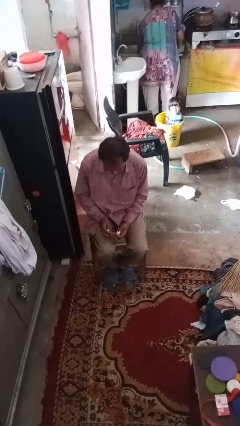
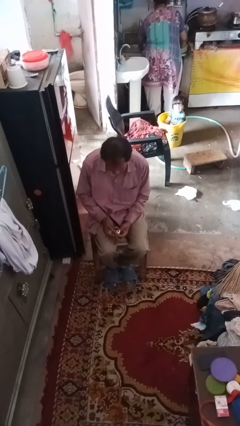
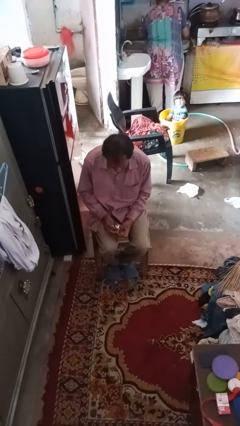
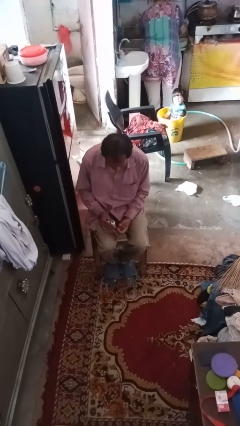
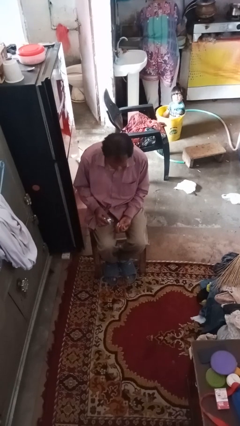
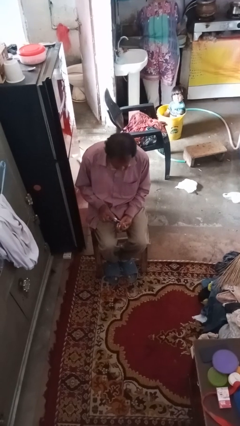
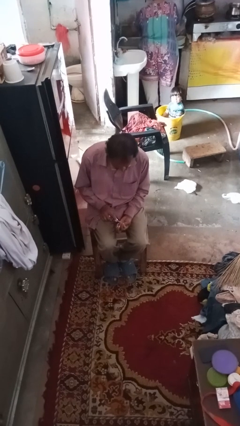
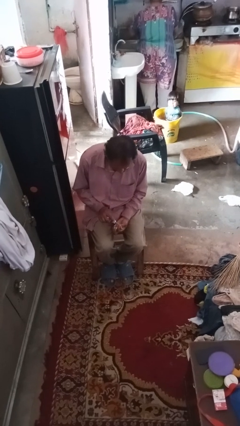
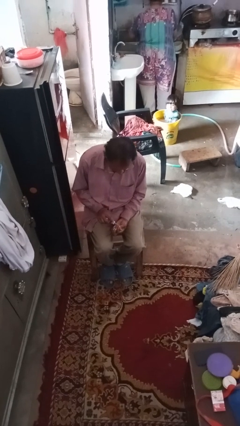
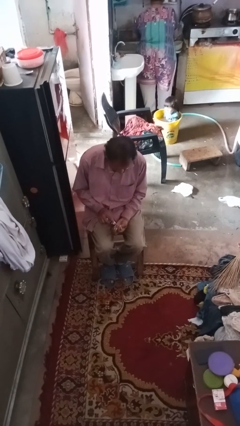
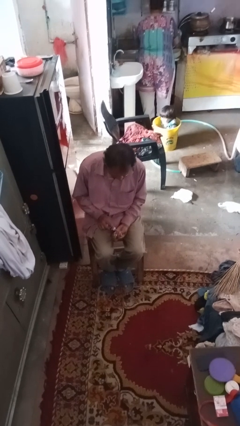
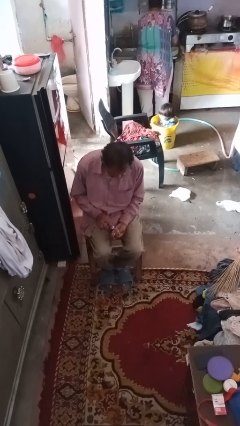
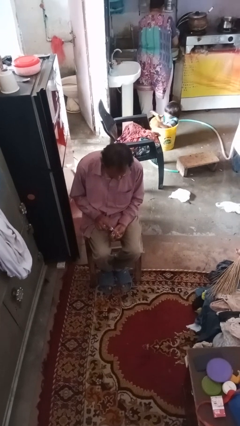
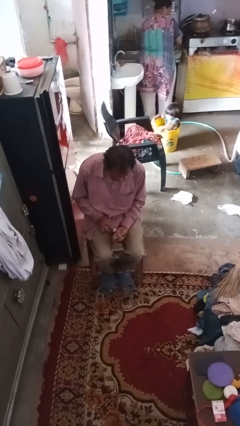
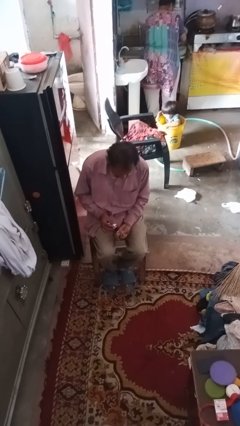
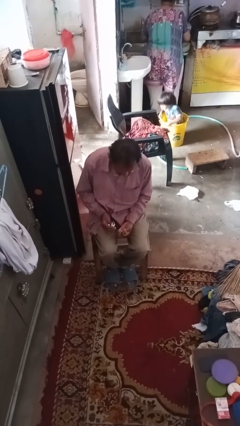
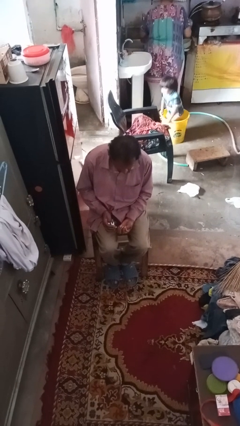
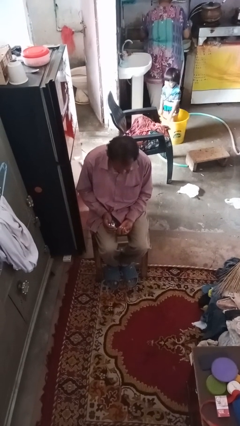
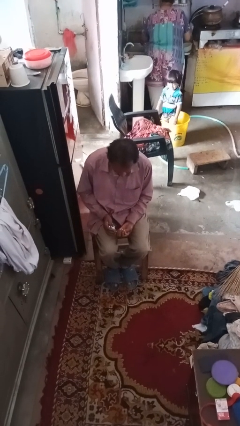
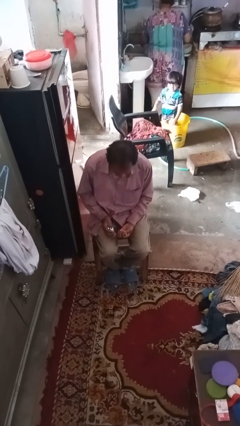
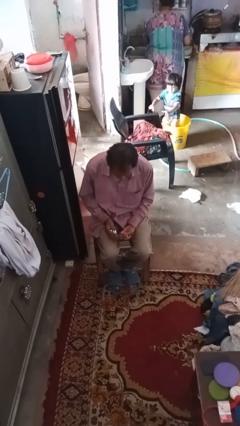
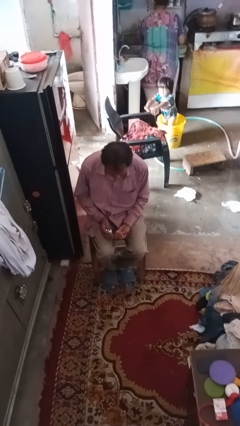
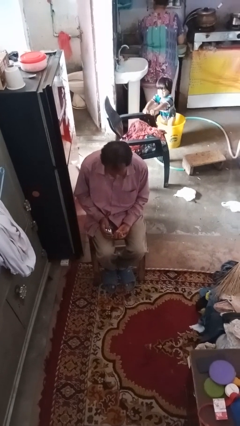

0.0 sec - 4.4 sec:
person paints fingernails

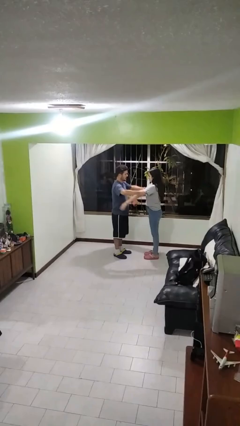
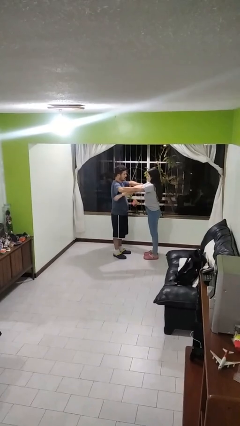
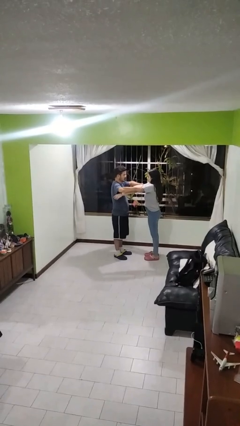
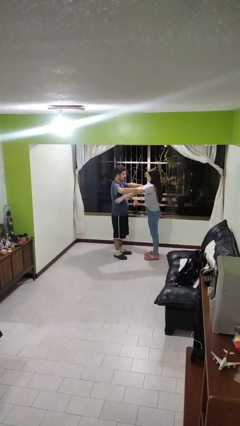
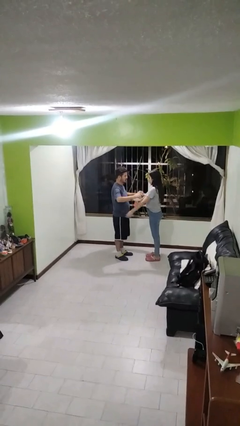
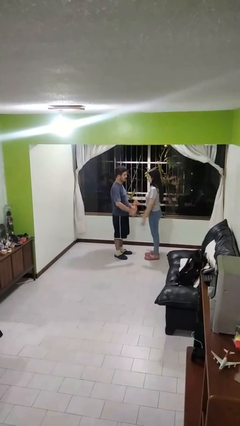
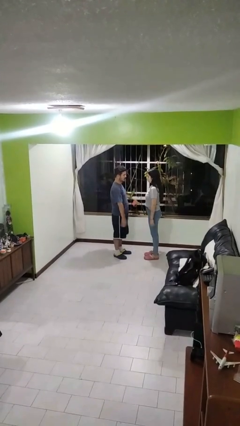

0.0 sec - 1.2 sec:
person grabs person by bicep

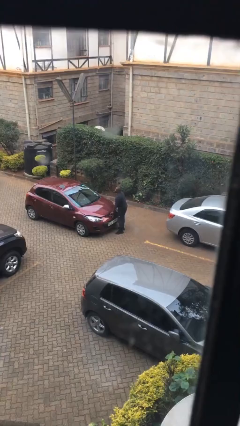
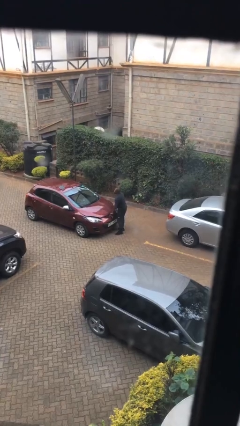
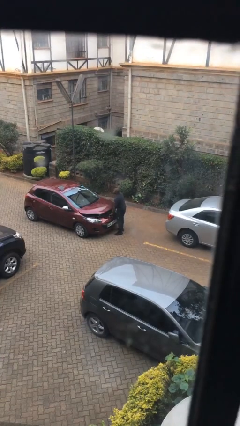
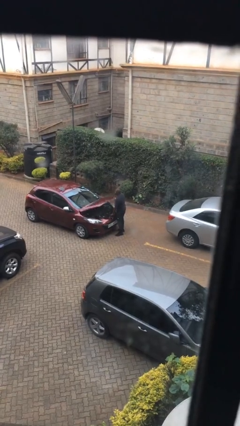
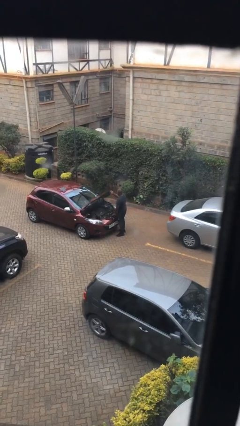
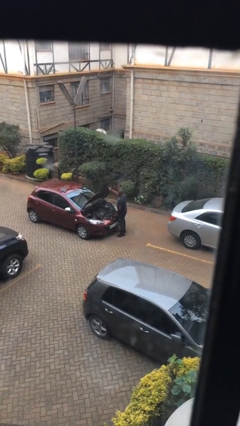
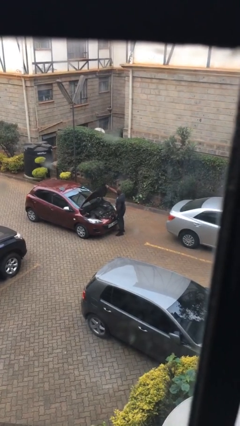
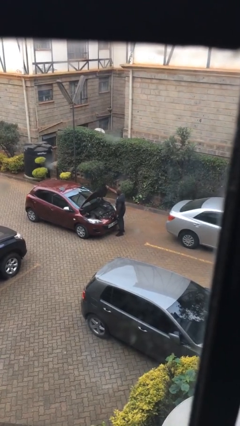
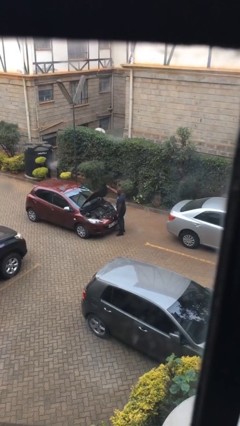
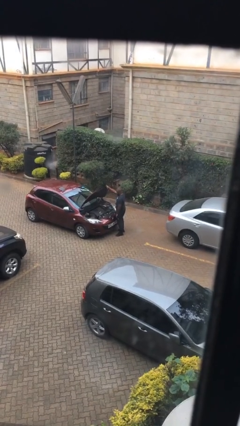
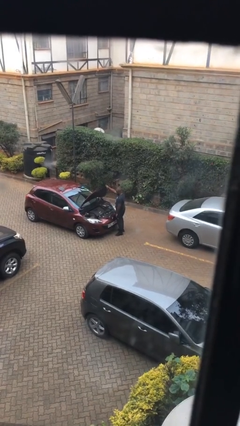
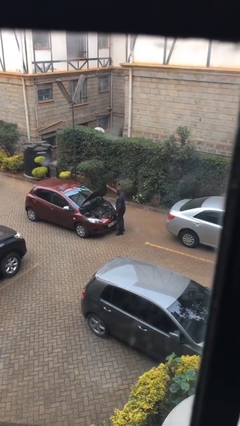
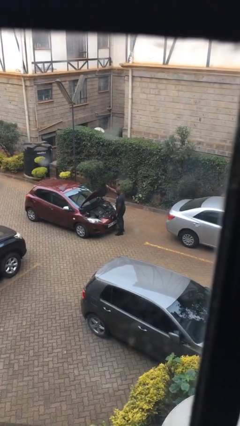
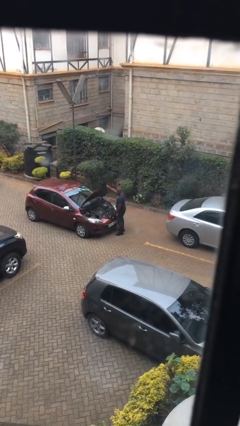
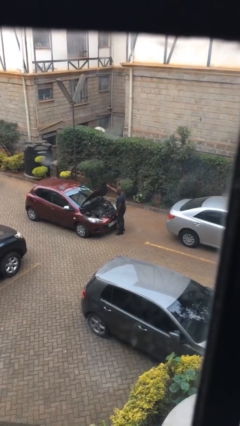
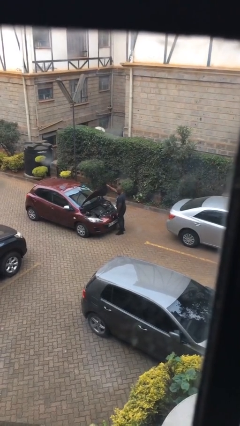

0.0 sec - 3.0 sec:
person opens car hood

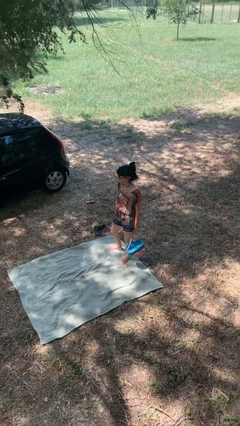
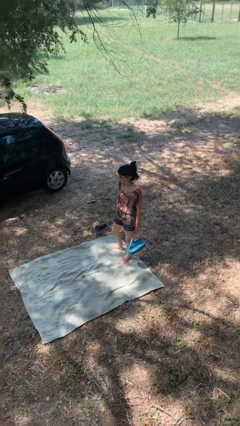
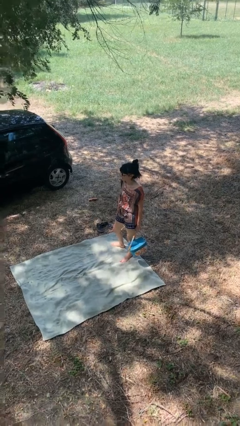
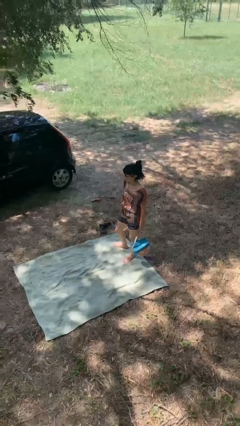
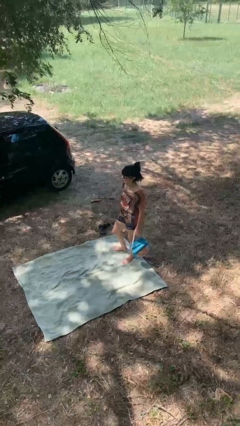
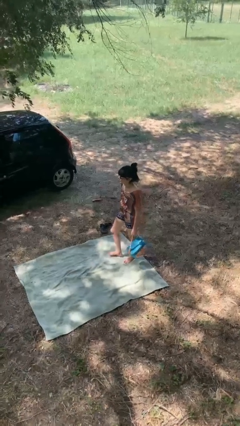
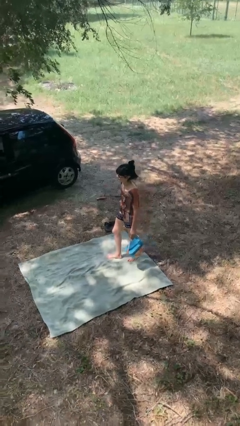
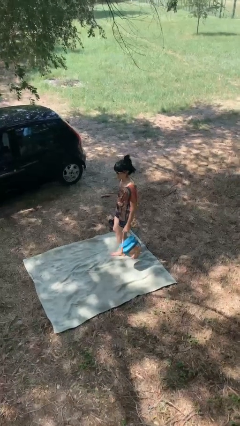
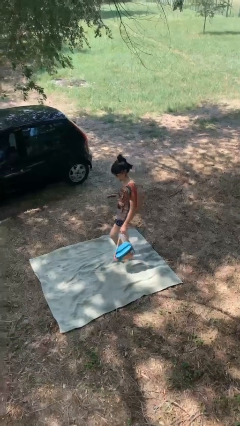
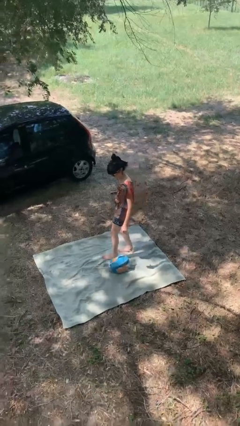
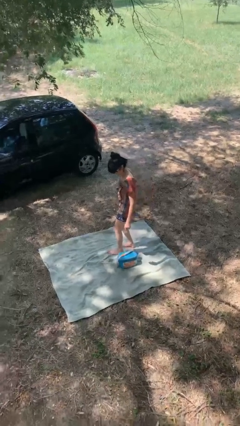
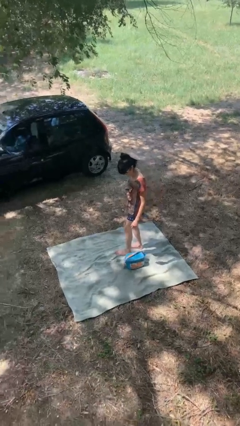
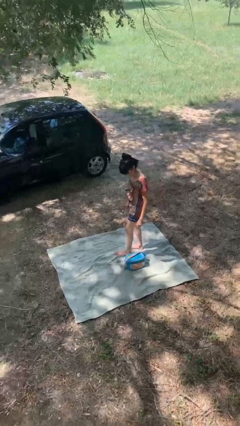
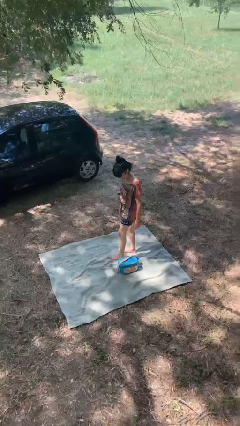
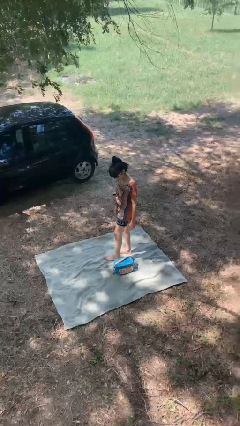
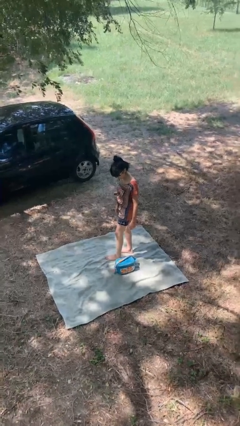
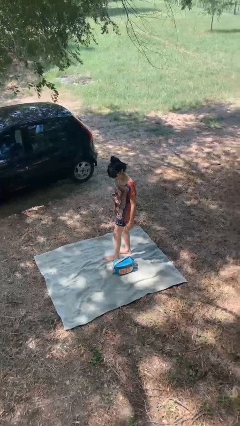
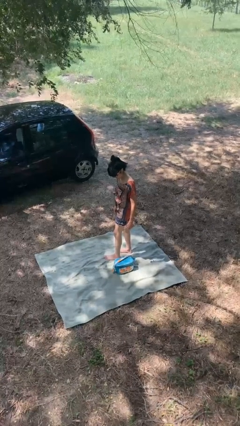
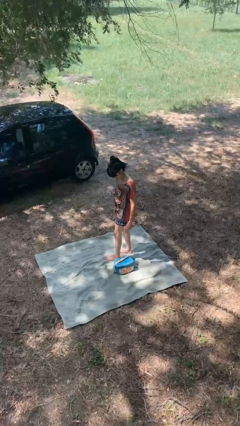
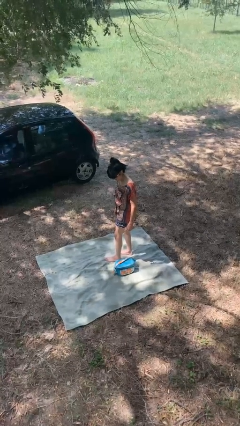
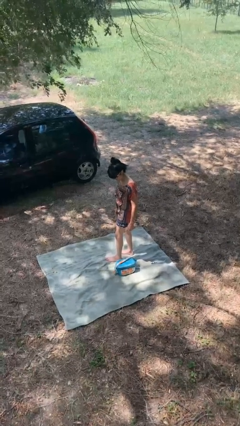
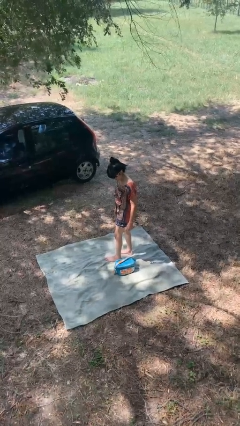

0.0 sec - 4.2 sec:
person drops object

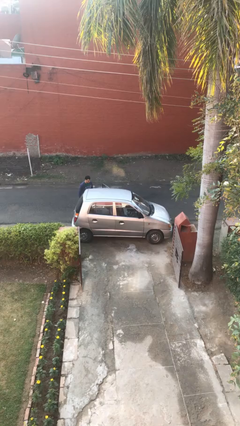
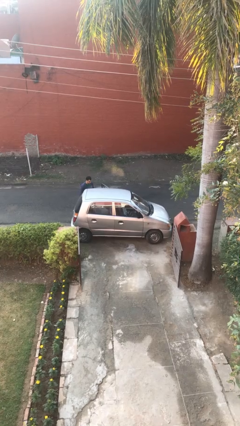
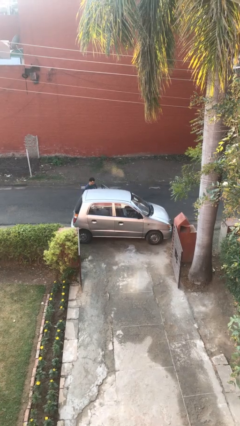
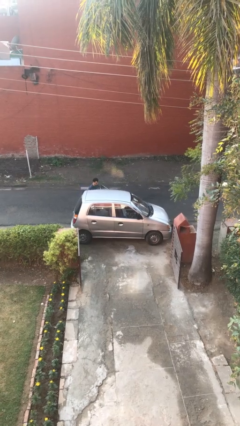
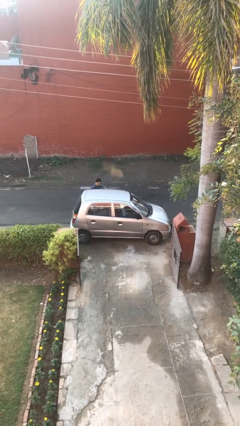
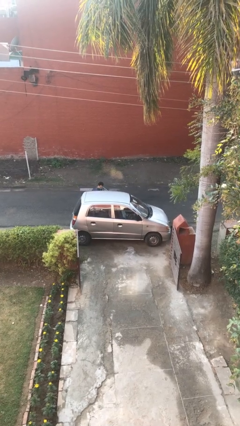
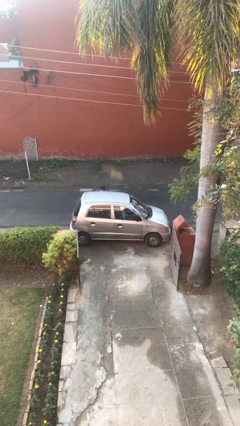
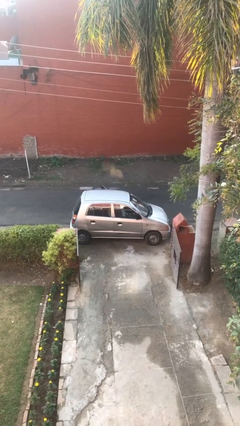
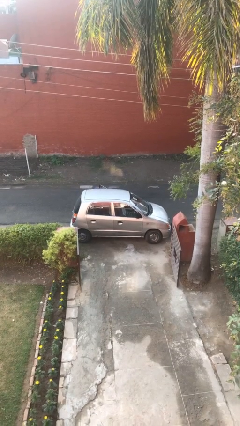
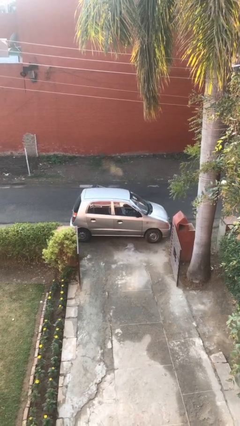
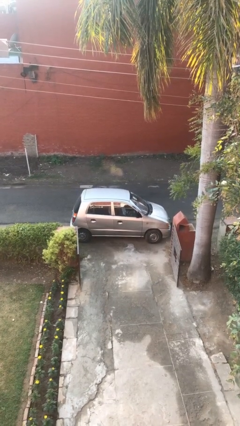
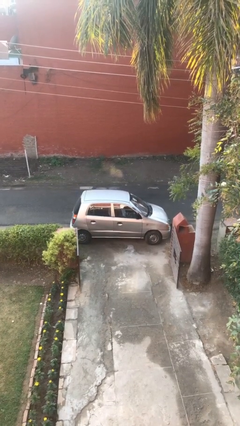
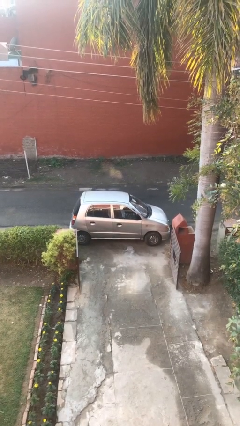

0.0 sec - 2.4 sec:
car picks up person

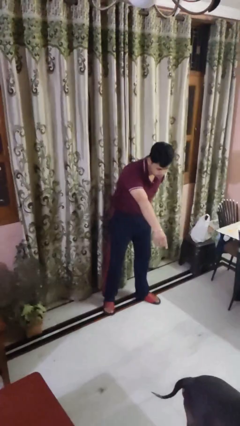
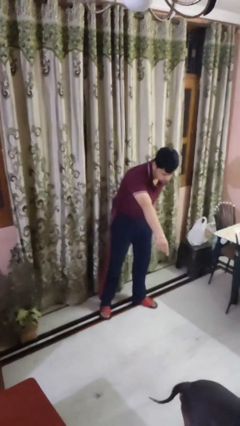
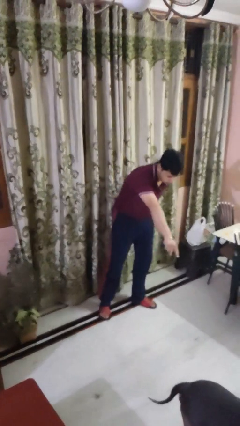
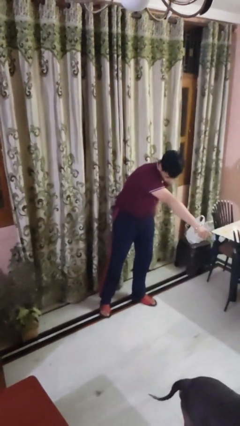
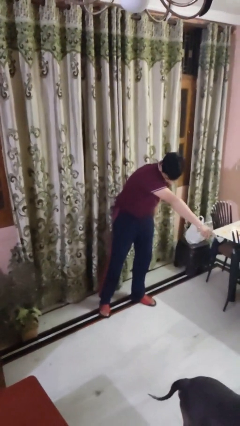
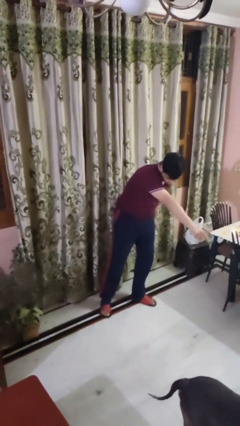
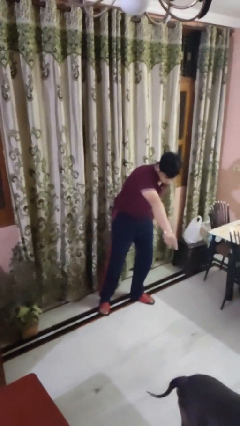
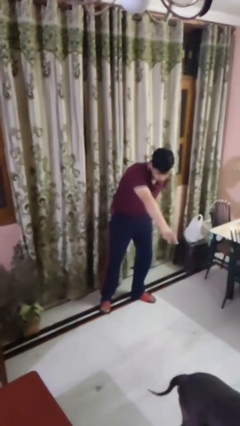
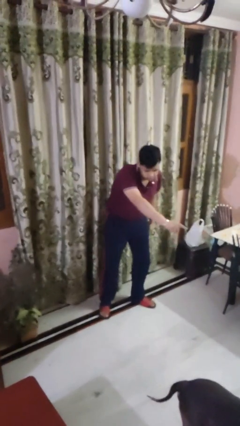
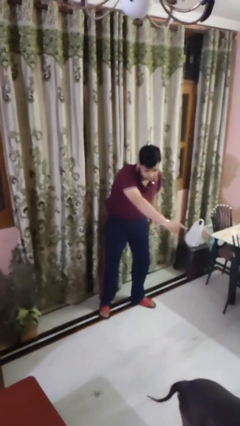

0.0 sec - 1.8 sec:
person points to dog

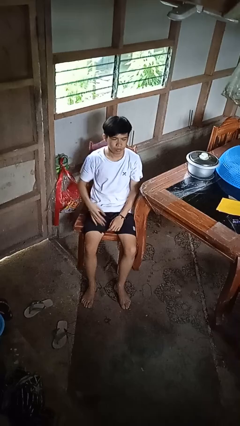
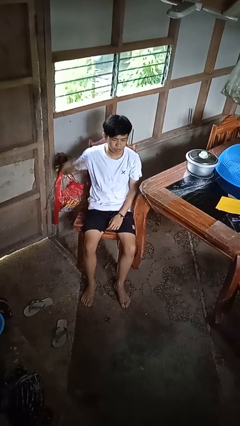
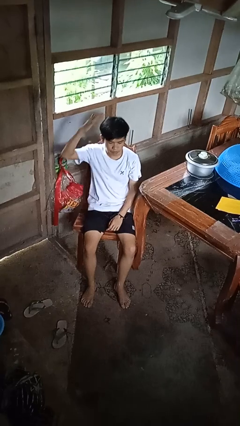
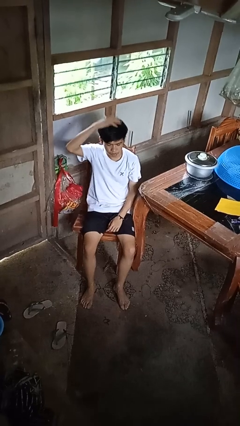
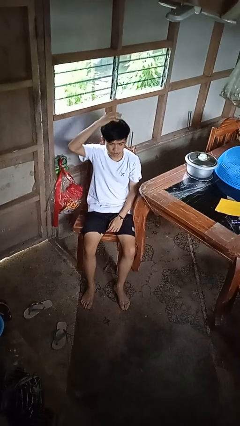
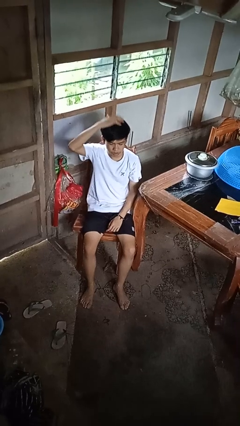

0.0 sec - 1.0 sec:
person pats head
